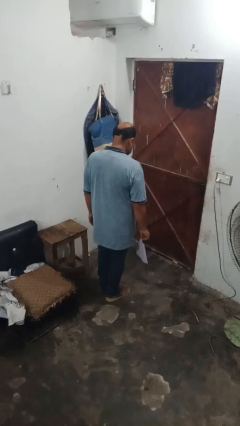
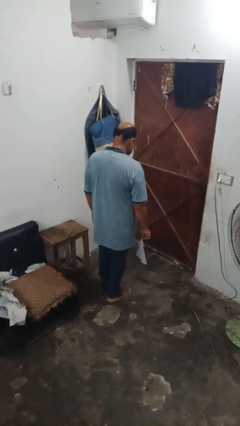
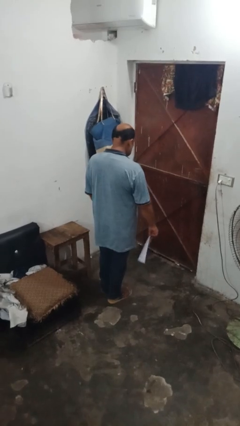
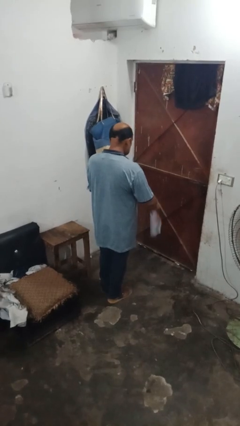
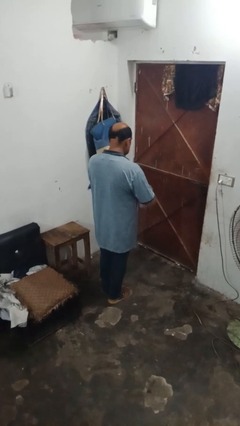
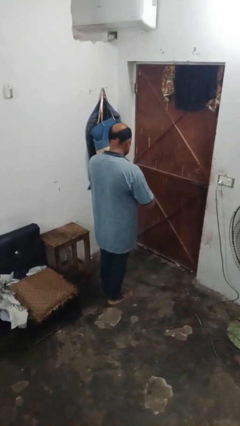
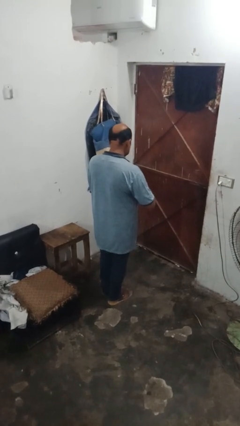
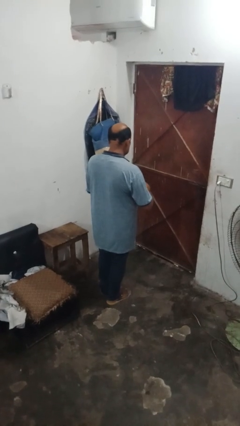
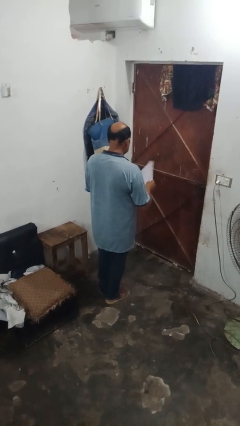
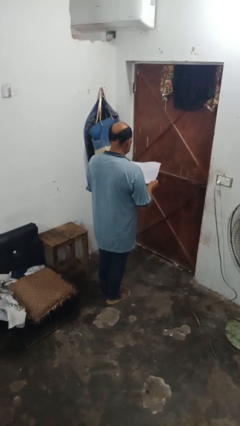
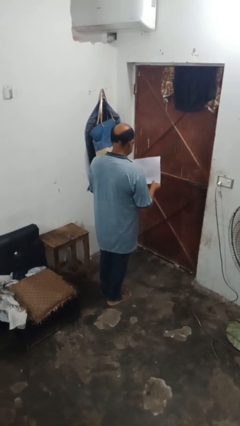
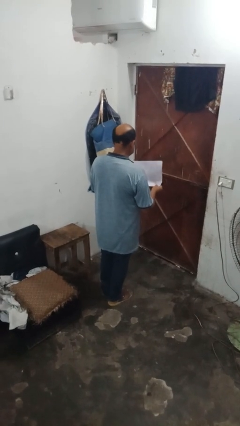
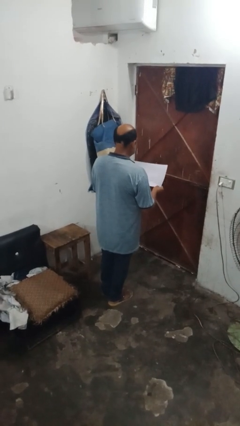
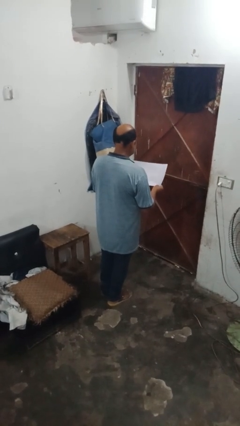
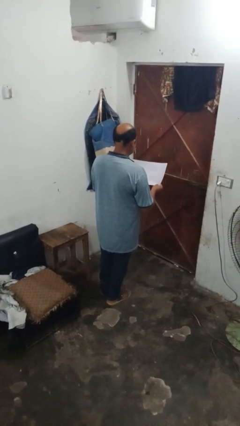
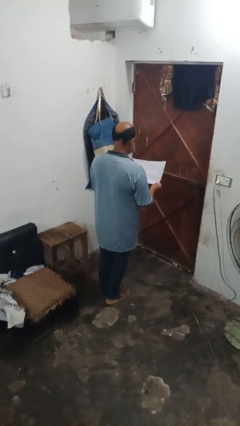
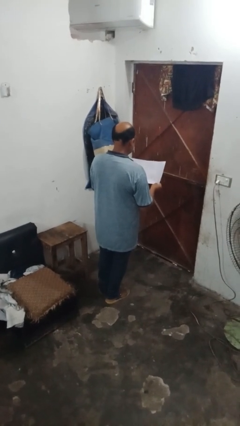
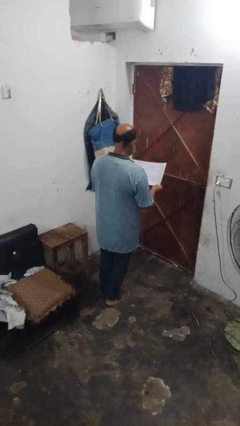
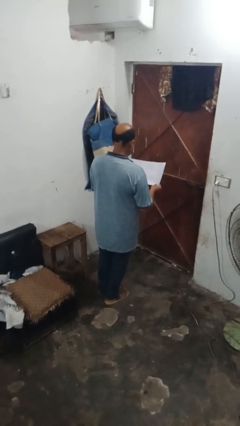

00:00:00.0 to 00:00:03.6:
person reads newspaper

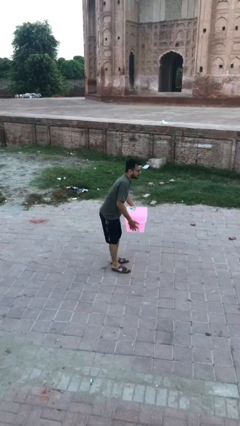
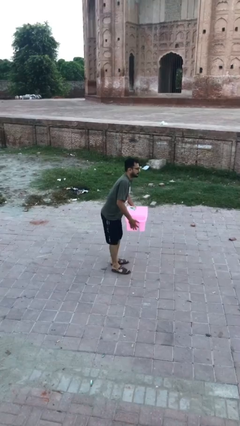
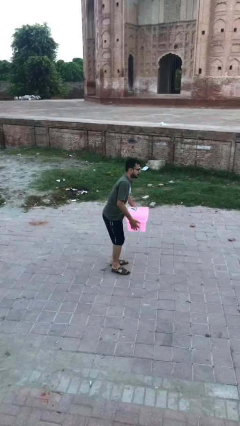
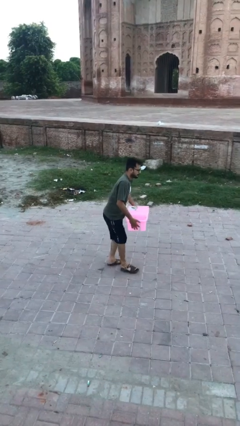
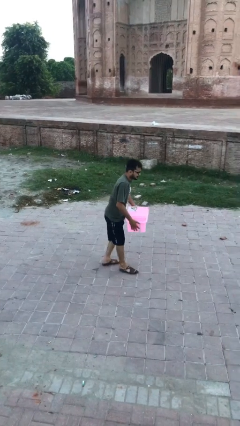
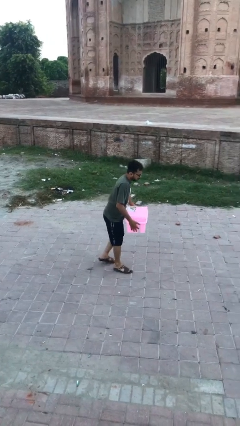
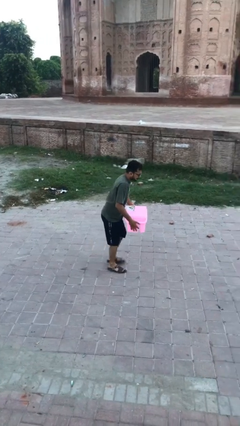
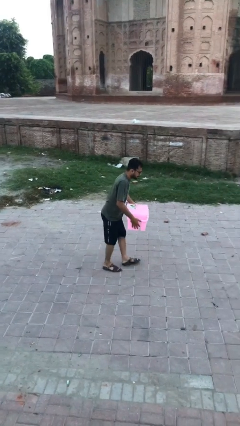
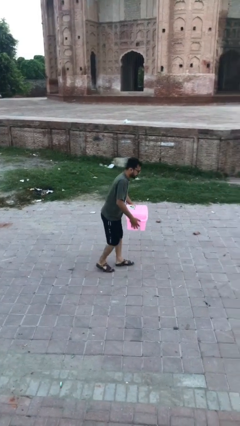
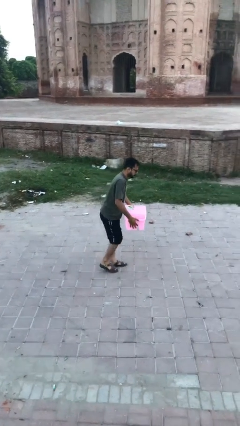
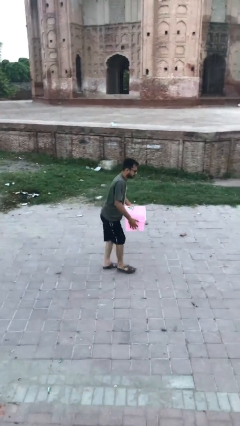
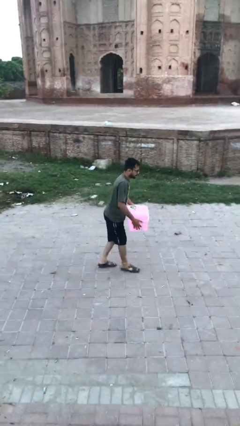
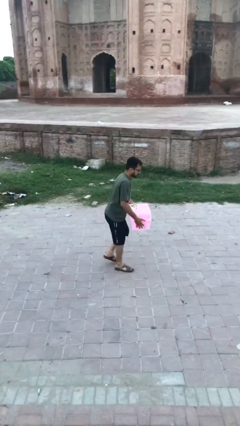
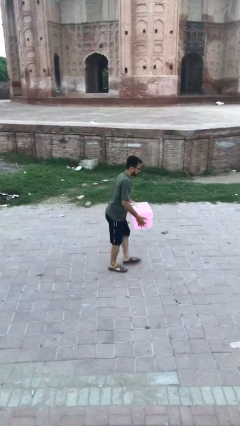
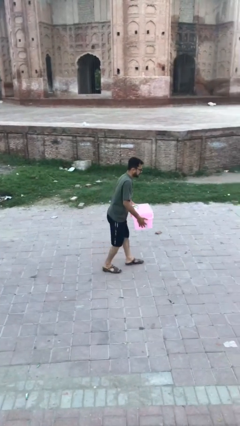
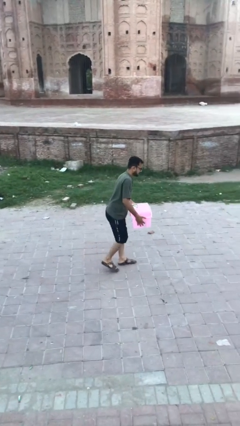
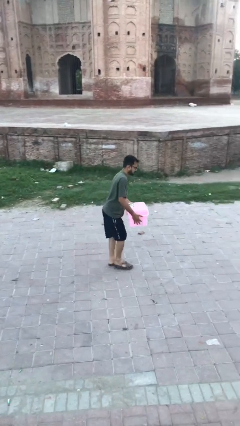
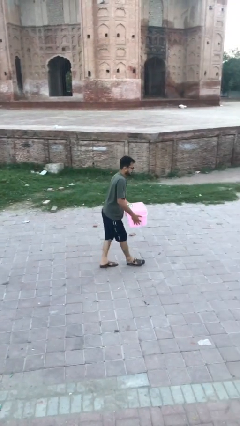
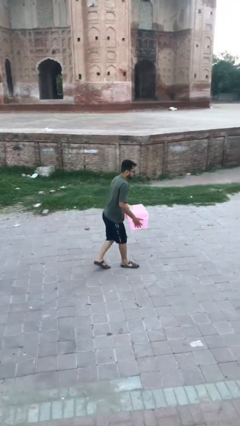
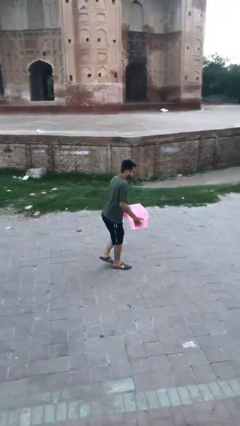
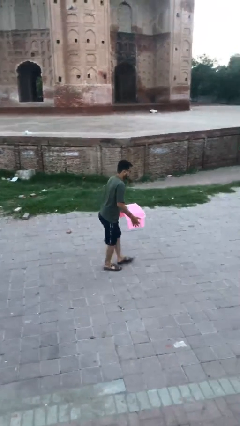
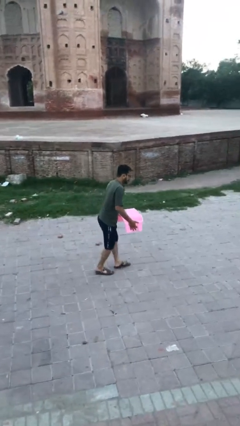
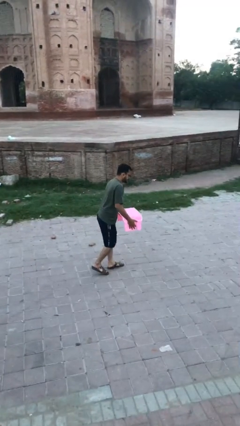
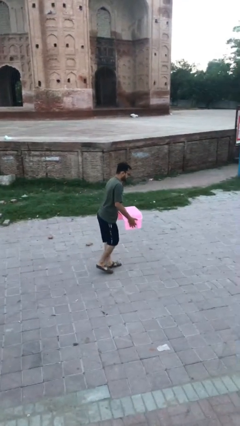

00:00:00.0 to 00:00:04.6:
person carries heavy object

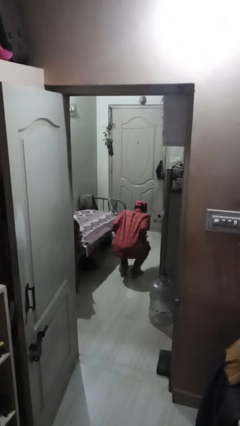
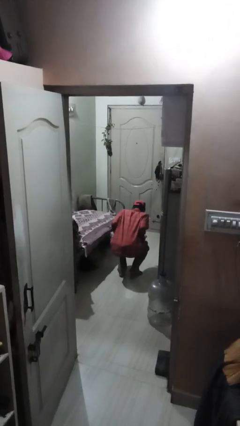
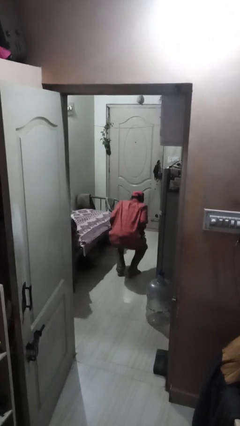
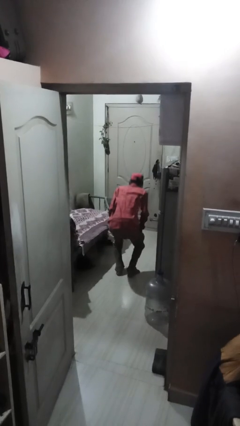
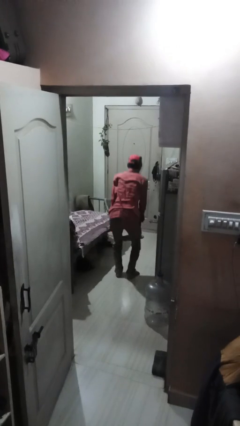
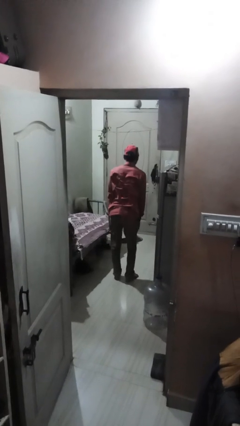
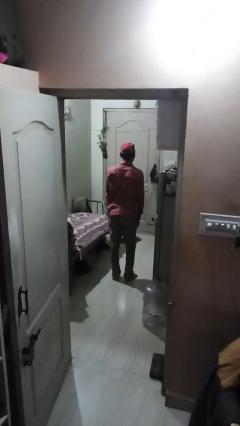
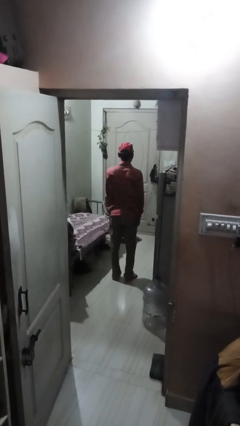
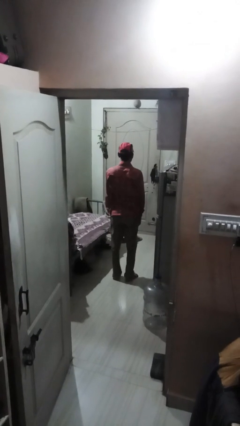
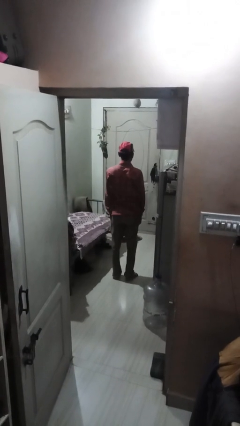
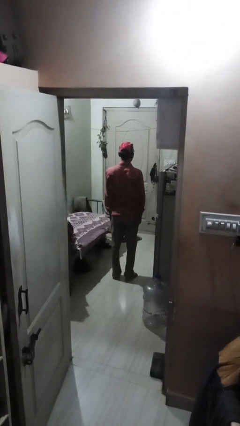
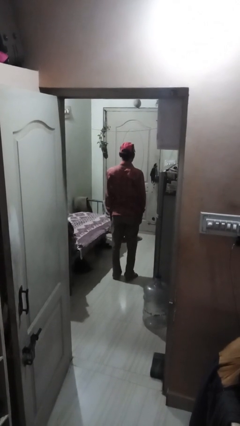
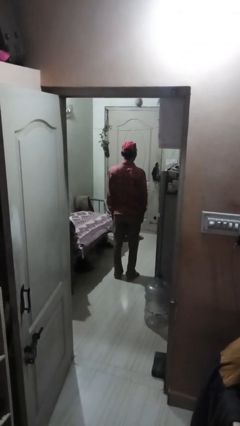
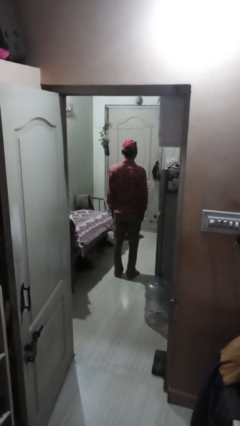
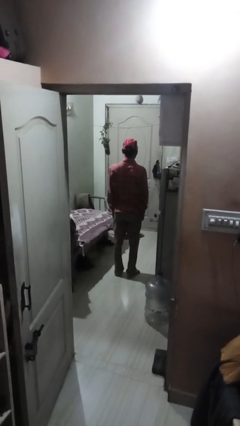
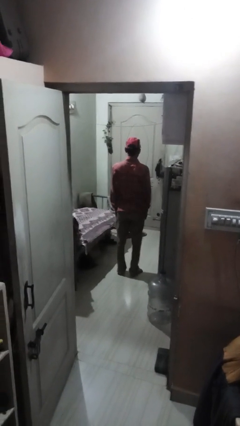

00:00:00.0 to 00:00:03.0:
person stands up

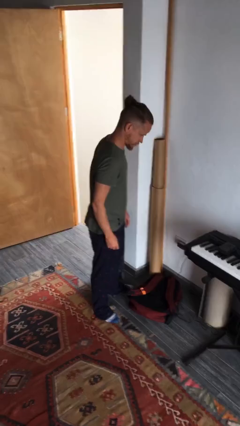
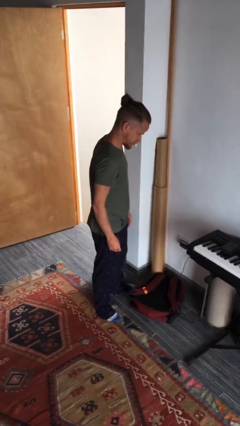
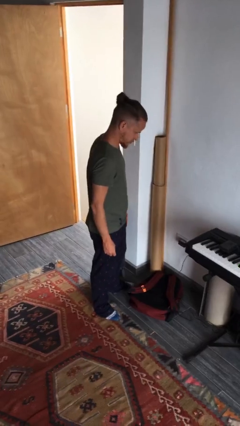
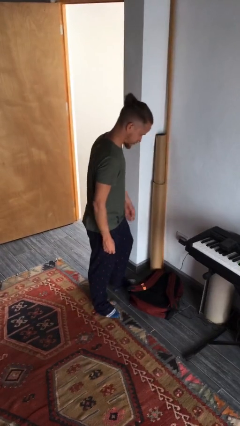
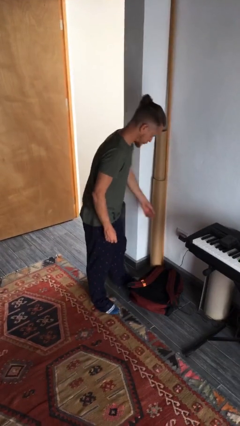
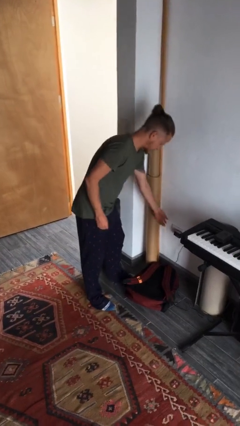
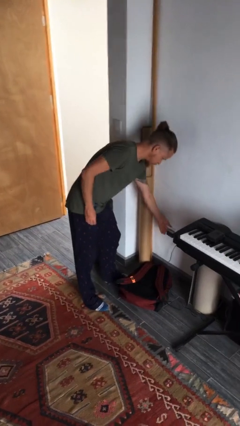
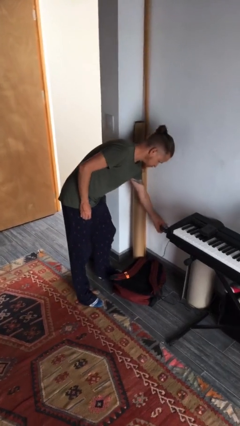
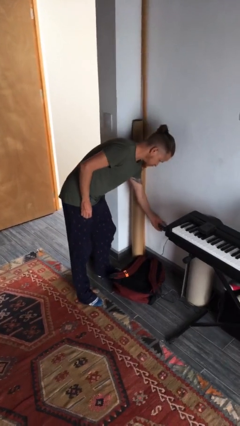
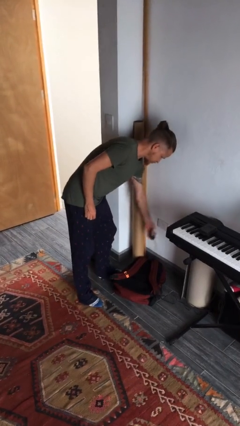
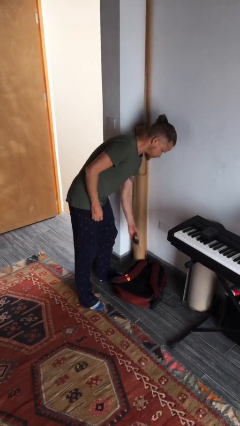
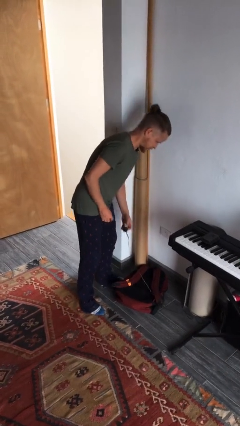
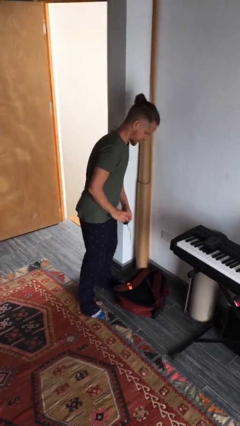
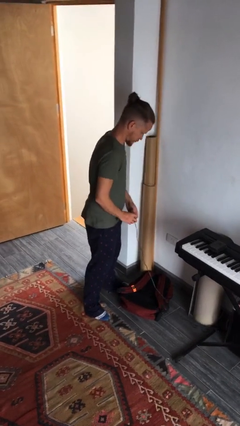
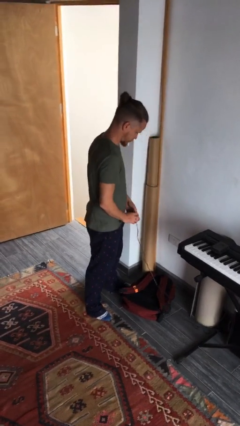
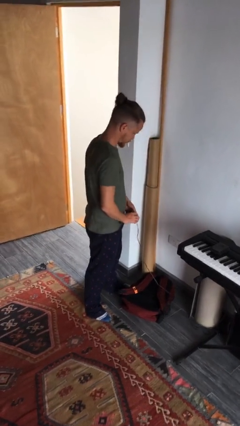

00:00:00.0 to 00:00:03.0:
person unplugs from electrical socket

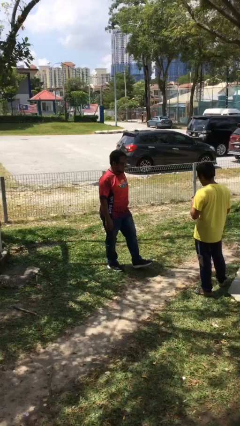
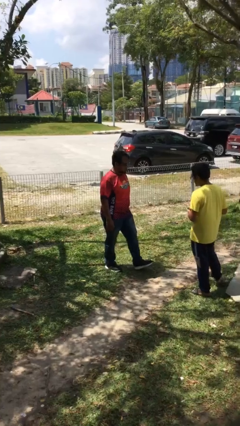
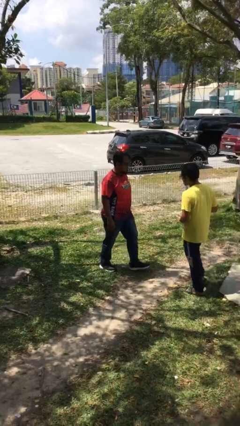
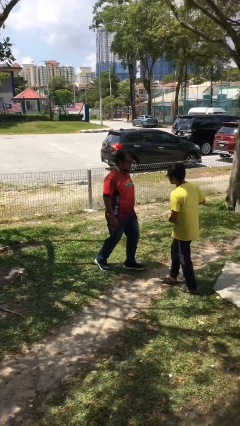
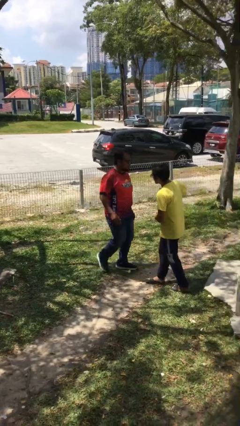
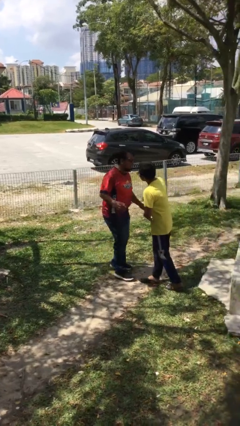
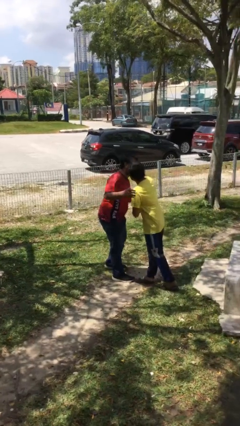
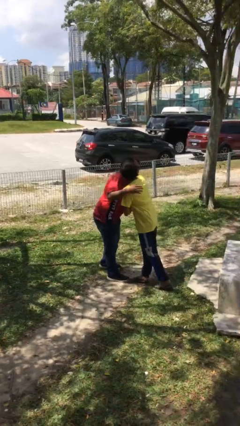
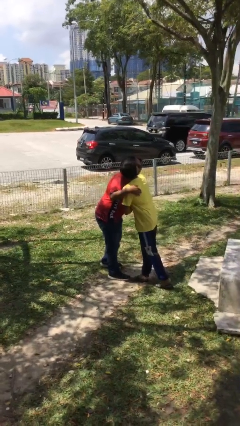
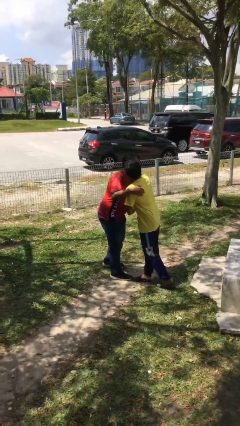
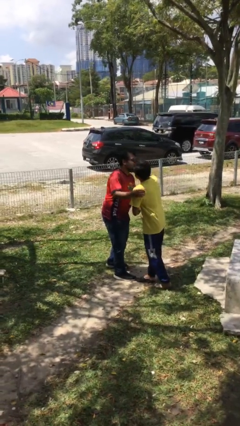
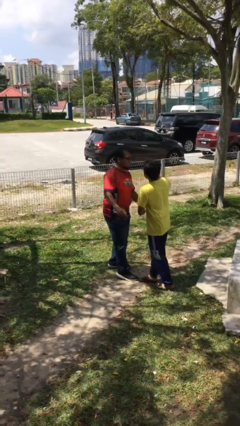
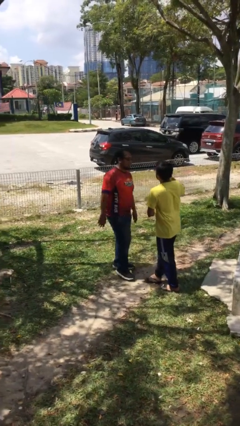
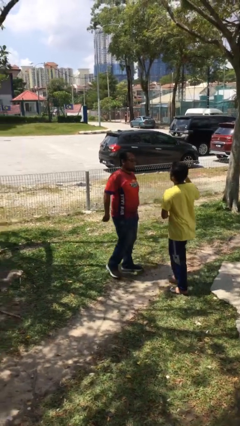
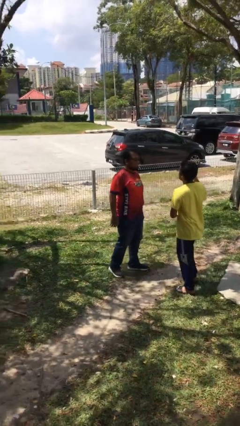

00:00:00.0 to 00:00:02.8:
person embraces person

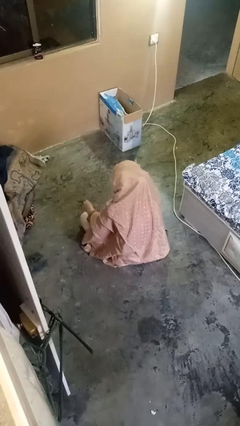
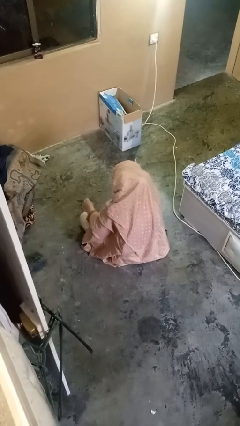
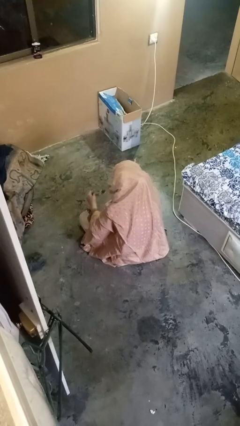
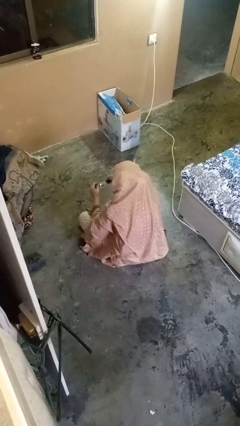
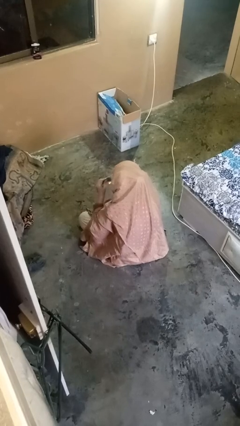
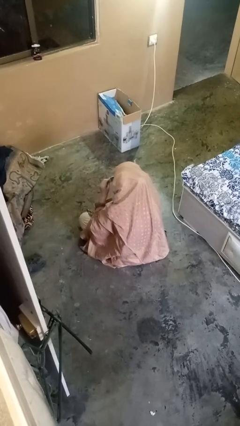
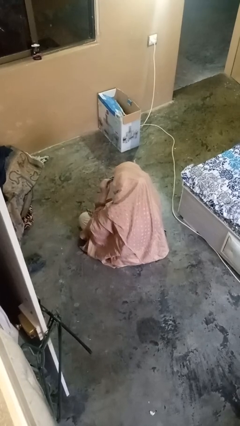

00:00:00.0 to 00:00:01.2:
person puts on glasses
